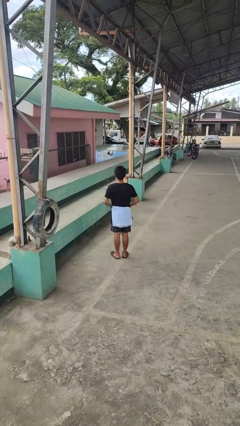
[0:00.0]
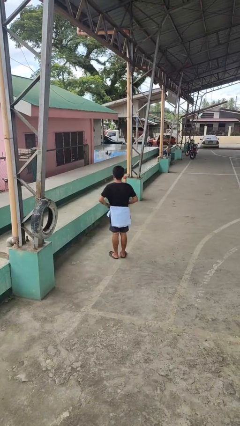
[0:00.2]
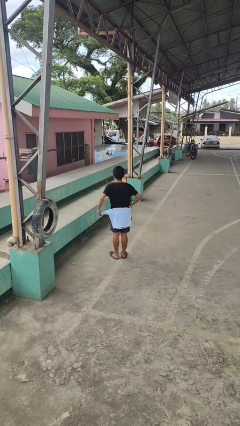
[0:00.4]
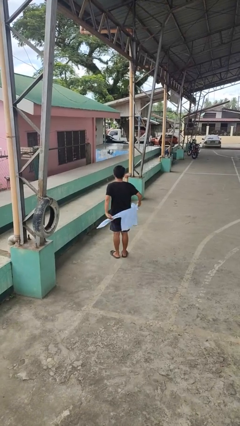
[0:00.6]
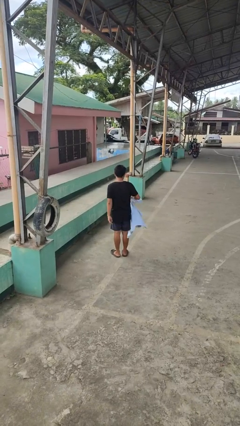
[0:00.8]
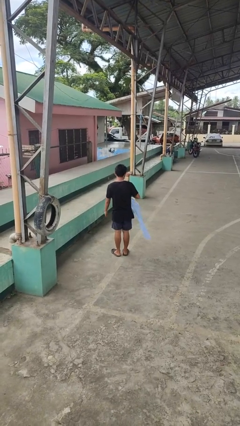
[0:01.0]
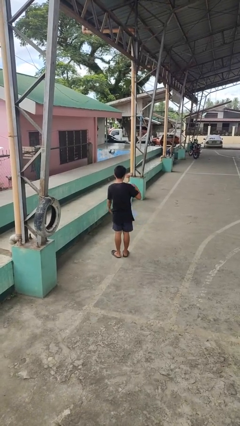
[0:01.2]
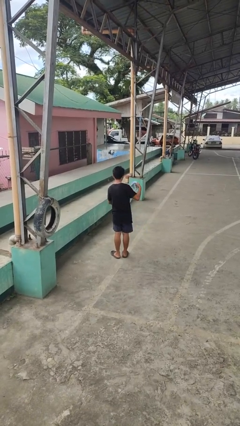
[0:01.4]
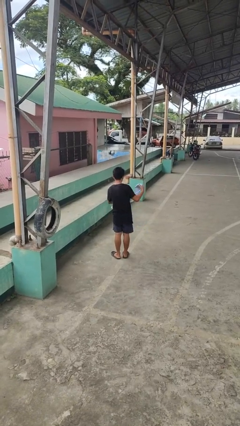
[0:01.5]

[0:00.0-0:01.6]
person unties jacket around waist

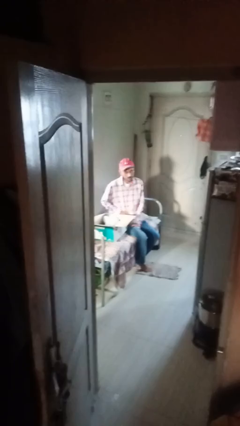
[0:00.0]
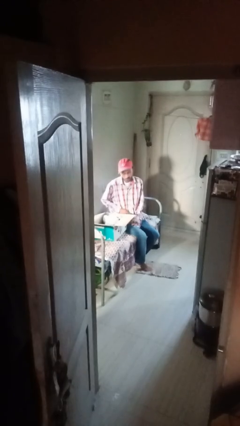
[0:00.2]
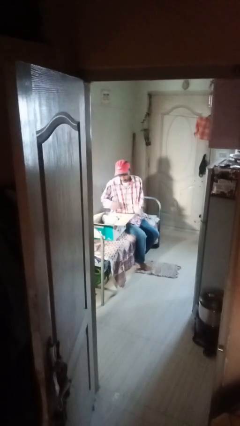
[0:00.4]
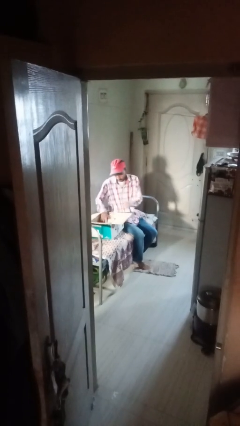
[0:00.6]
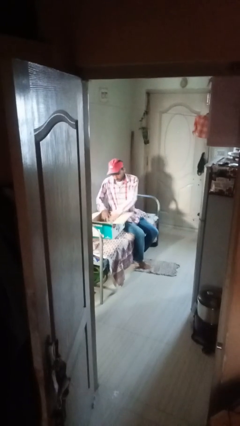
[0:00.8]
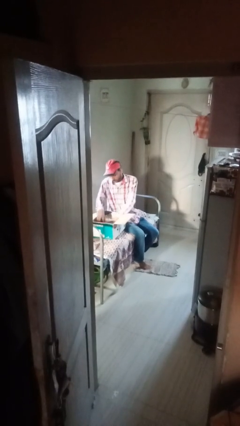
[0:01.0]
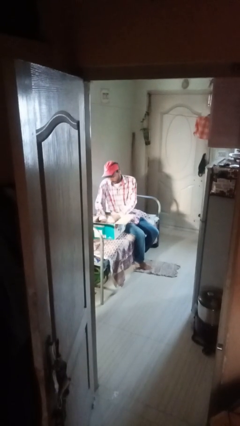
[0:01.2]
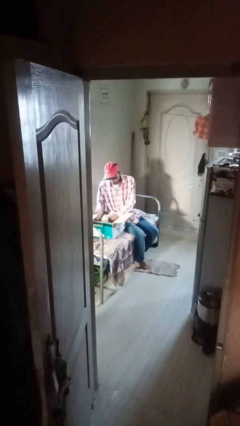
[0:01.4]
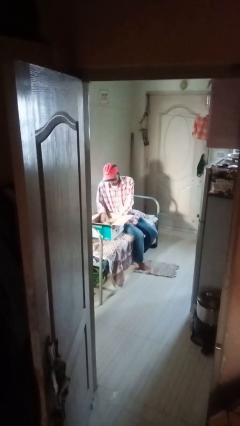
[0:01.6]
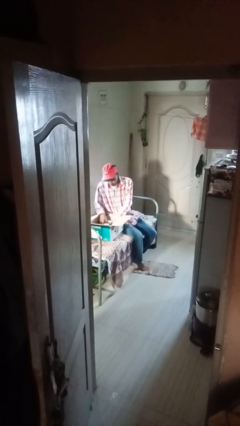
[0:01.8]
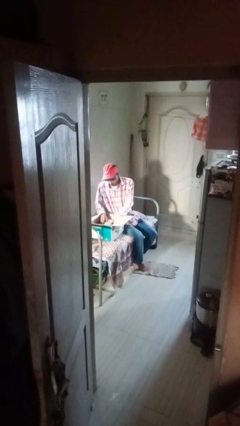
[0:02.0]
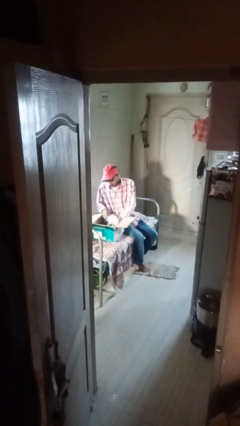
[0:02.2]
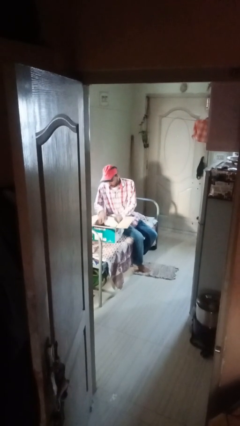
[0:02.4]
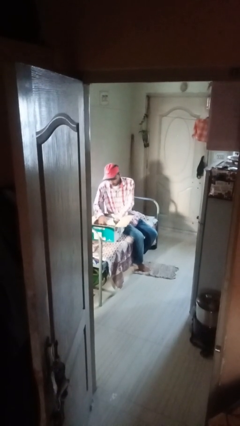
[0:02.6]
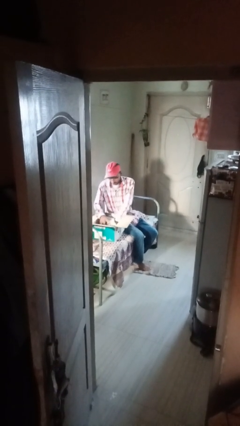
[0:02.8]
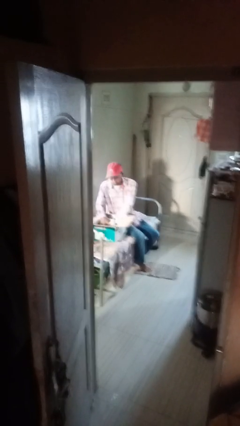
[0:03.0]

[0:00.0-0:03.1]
person searches in box

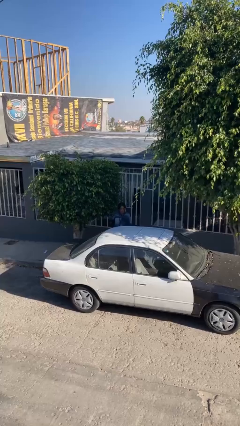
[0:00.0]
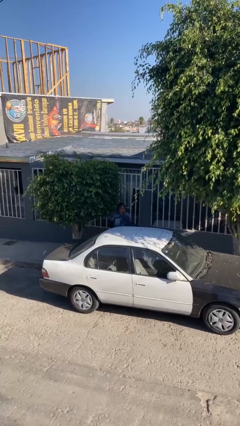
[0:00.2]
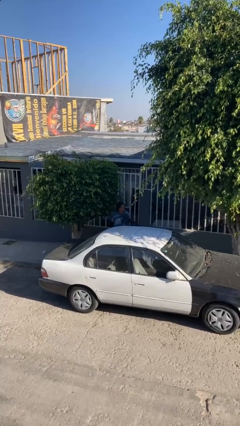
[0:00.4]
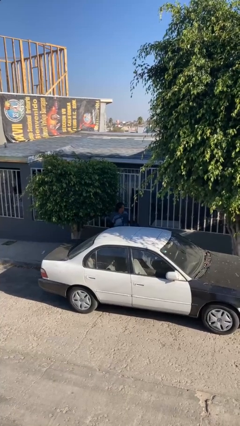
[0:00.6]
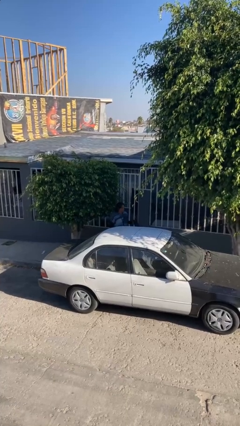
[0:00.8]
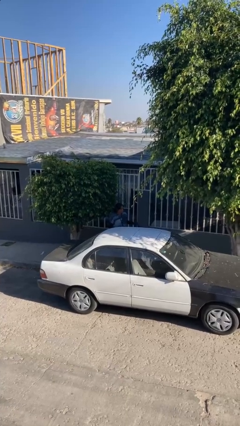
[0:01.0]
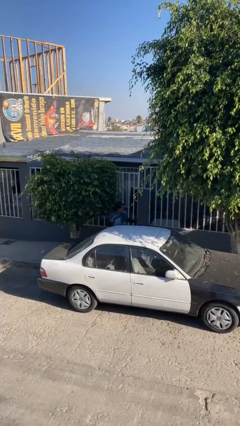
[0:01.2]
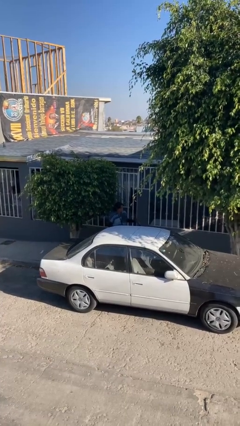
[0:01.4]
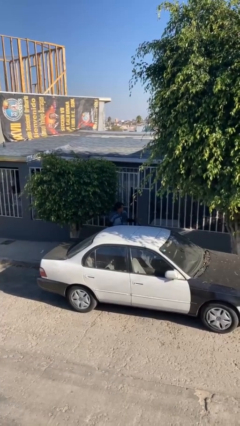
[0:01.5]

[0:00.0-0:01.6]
person opens car door

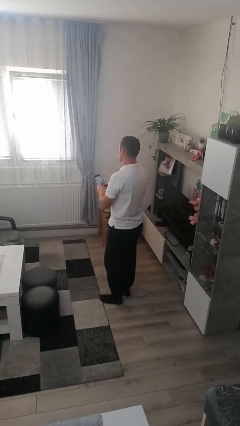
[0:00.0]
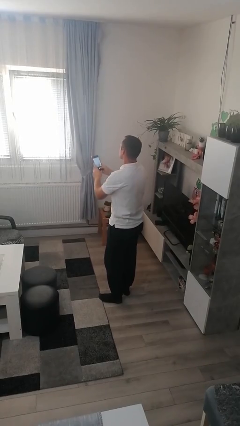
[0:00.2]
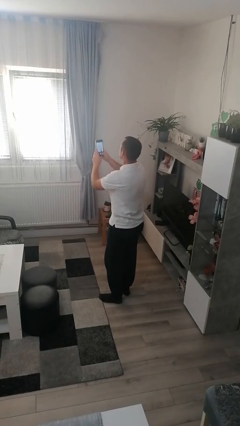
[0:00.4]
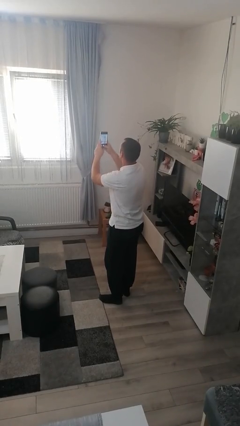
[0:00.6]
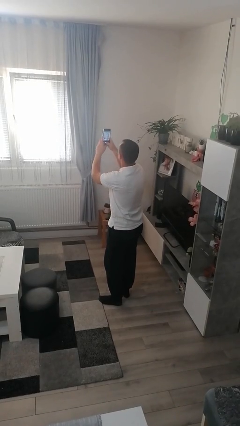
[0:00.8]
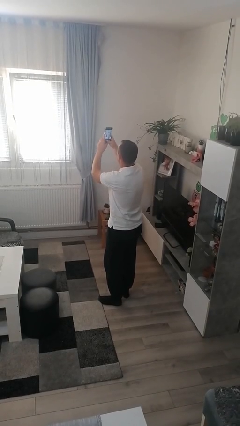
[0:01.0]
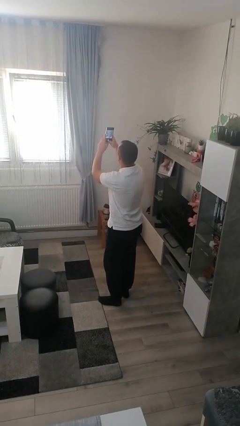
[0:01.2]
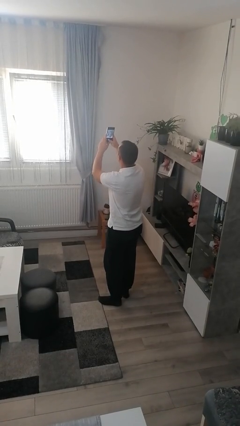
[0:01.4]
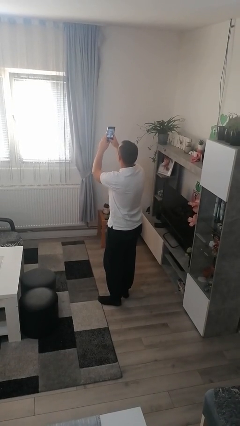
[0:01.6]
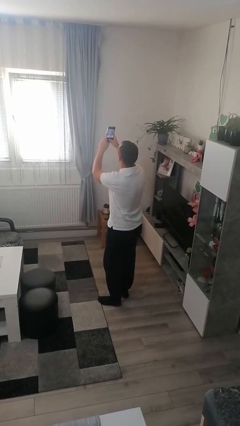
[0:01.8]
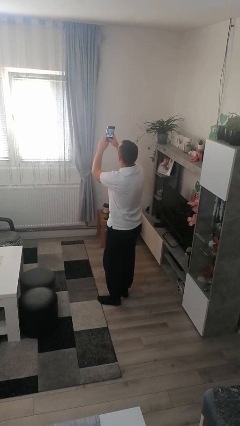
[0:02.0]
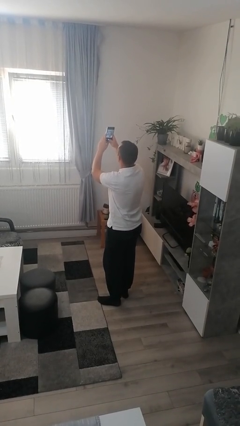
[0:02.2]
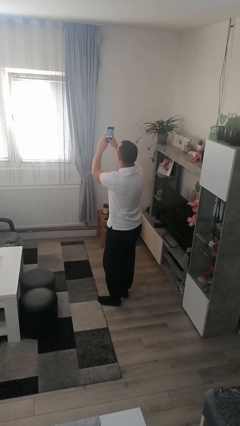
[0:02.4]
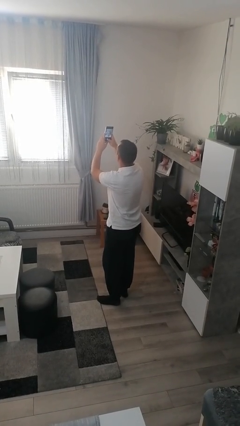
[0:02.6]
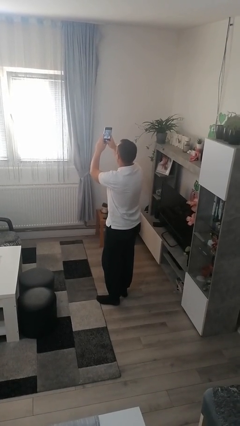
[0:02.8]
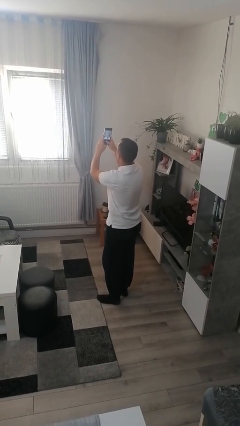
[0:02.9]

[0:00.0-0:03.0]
person takes selfie

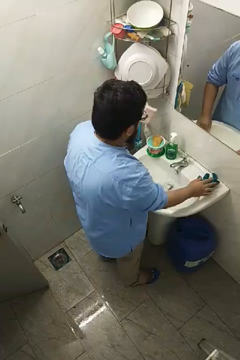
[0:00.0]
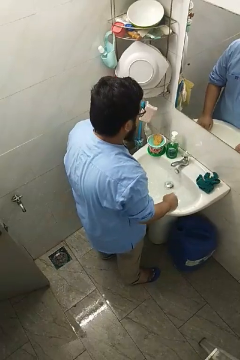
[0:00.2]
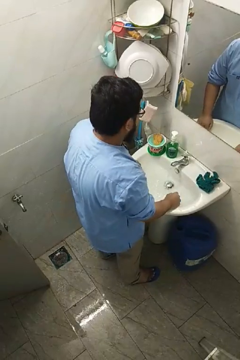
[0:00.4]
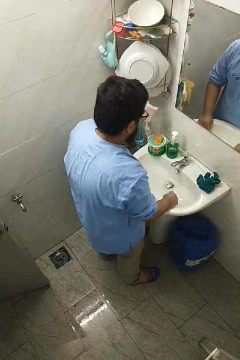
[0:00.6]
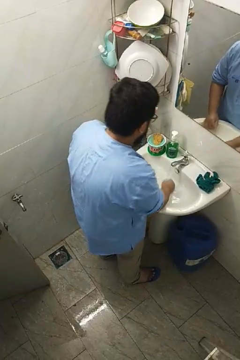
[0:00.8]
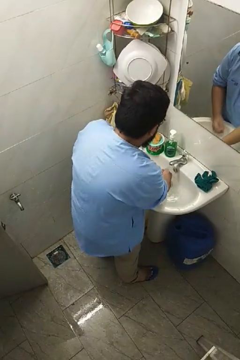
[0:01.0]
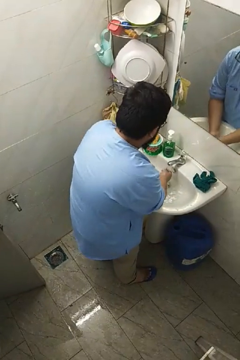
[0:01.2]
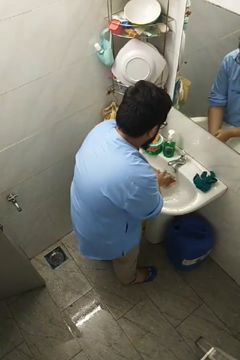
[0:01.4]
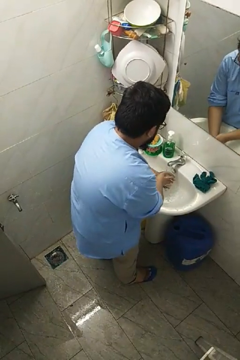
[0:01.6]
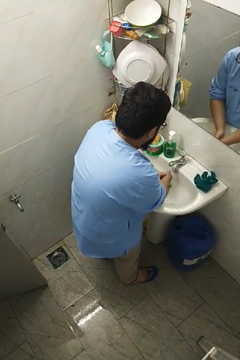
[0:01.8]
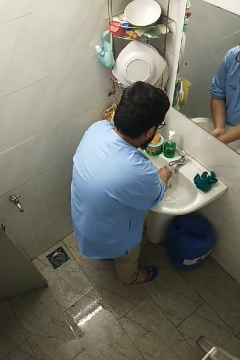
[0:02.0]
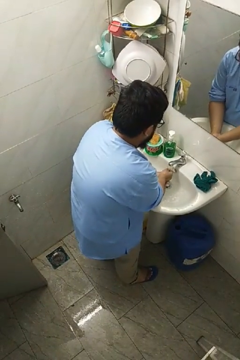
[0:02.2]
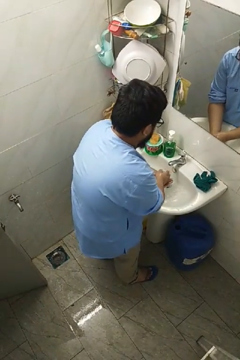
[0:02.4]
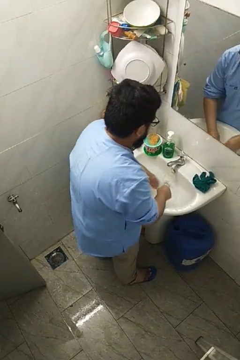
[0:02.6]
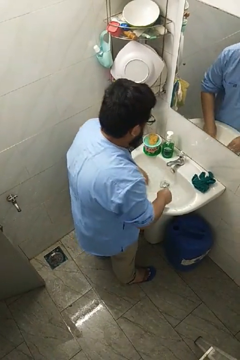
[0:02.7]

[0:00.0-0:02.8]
person washes hands

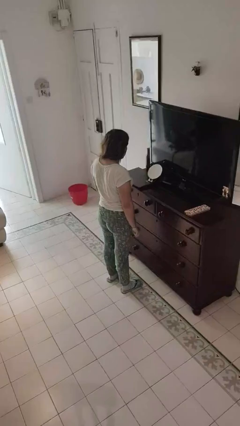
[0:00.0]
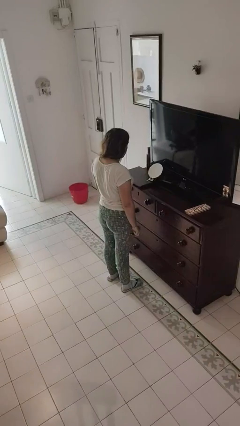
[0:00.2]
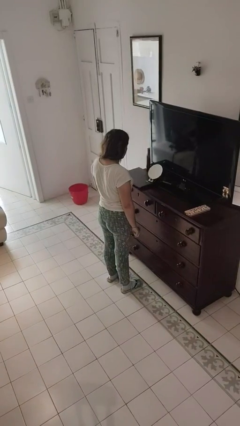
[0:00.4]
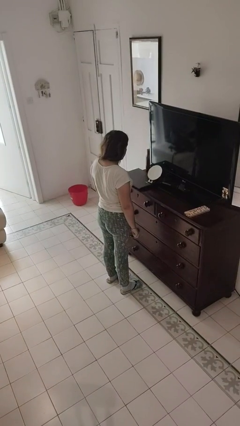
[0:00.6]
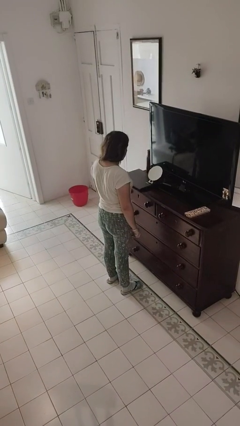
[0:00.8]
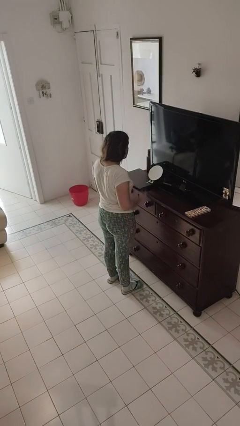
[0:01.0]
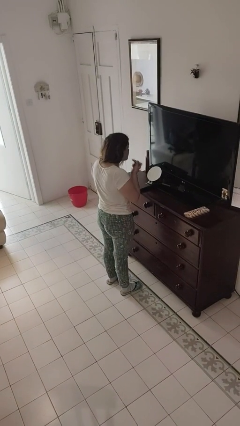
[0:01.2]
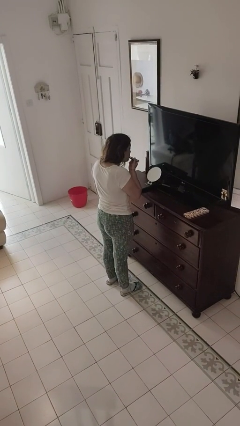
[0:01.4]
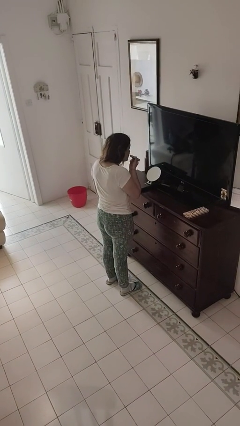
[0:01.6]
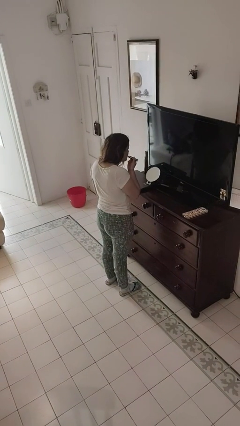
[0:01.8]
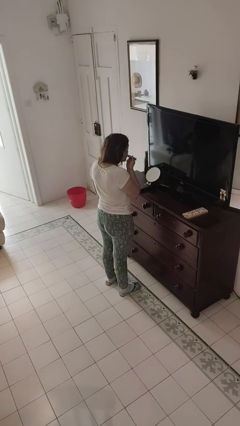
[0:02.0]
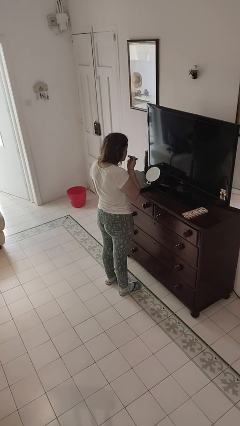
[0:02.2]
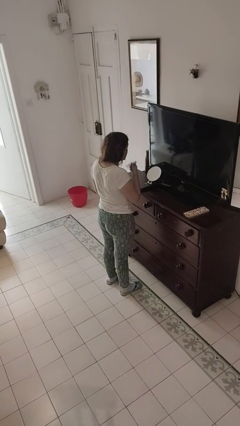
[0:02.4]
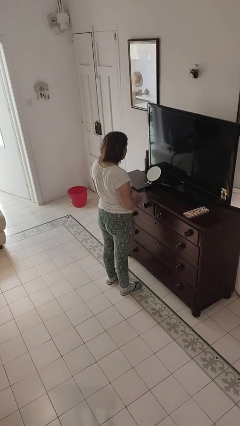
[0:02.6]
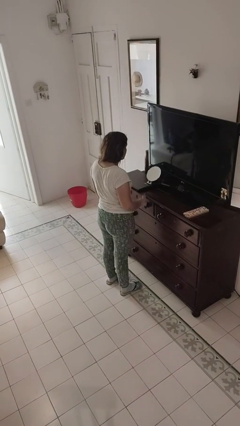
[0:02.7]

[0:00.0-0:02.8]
person applies lip makeup

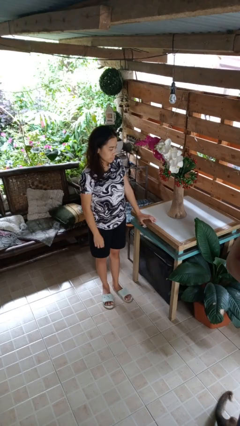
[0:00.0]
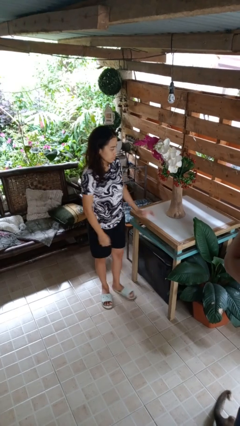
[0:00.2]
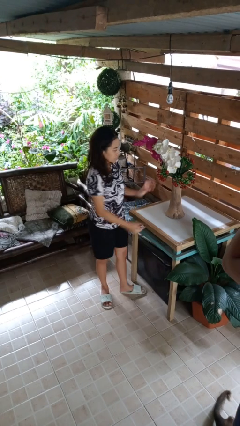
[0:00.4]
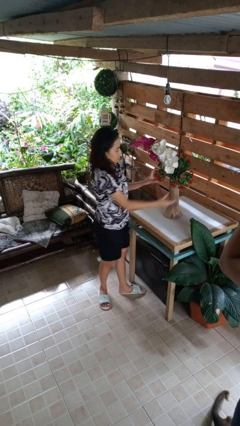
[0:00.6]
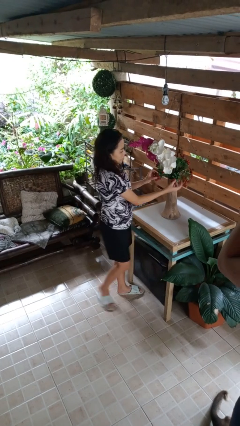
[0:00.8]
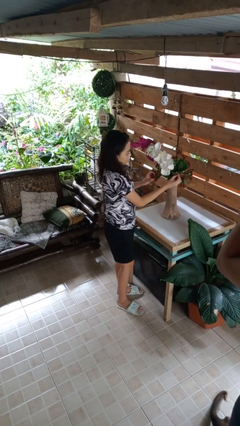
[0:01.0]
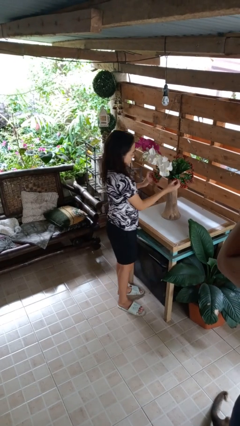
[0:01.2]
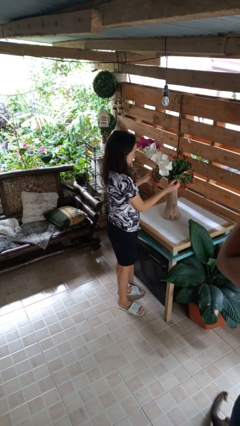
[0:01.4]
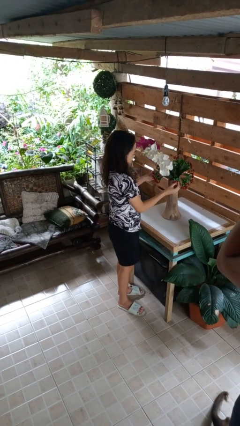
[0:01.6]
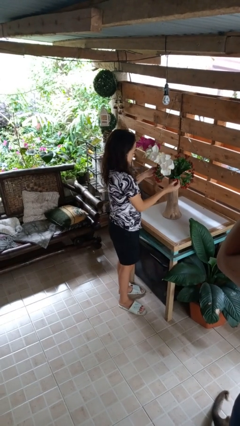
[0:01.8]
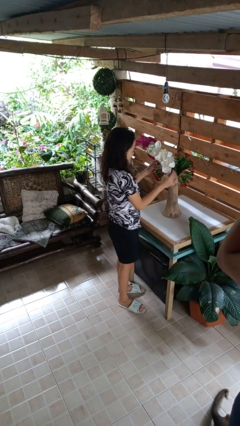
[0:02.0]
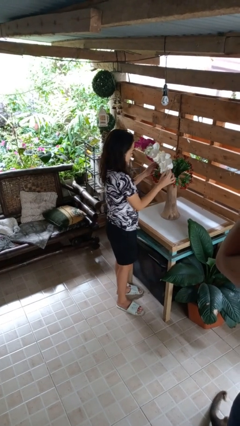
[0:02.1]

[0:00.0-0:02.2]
person arranges flowers in vase

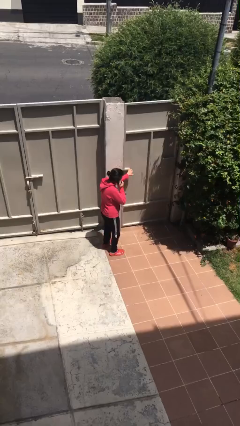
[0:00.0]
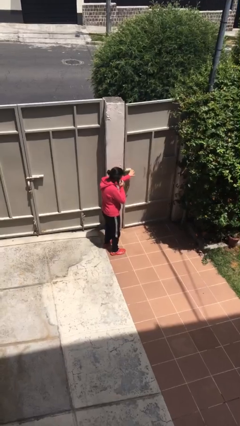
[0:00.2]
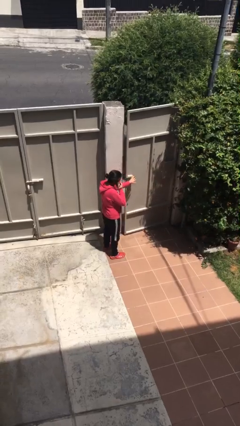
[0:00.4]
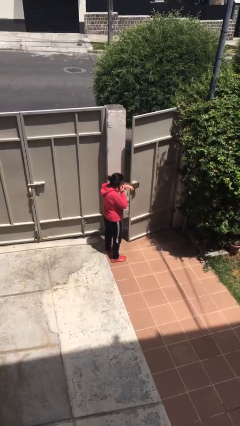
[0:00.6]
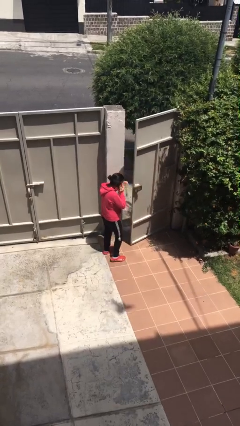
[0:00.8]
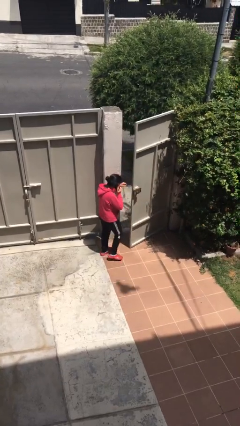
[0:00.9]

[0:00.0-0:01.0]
person opens facility door
